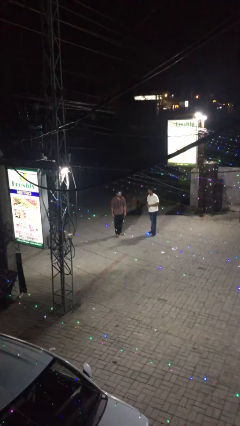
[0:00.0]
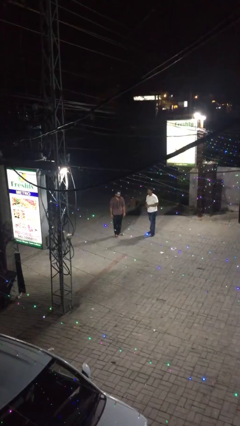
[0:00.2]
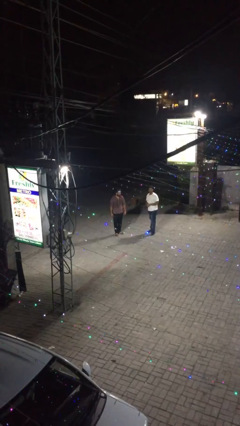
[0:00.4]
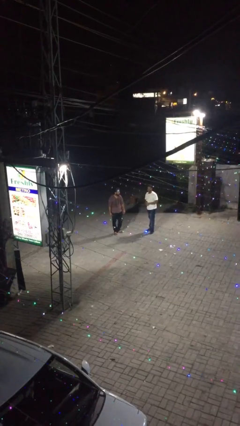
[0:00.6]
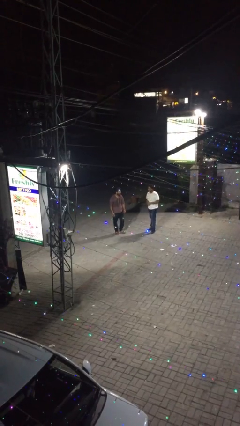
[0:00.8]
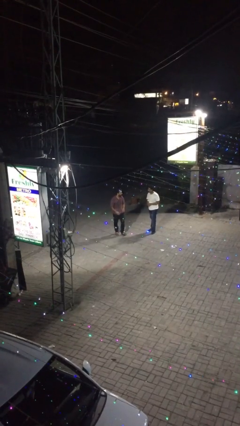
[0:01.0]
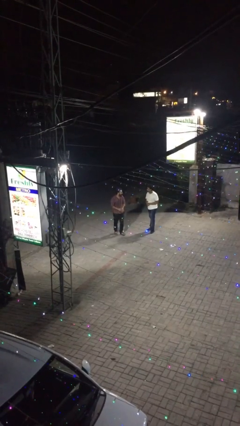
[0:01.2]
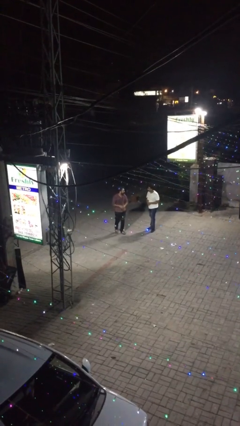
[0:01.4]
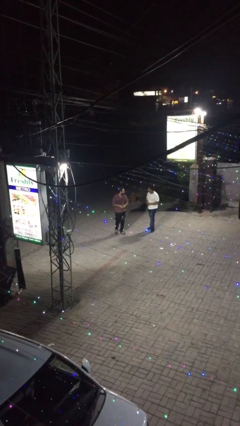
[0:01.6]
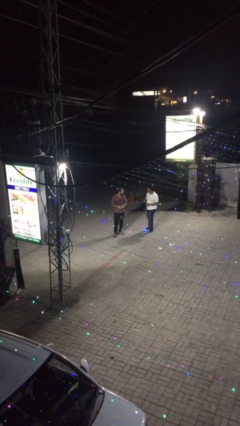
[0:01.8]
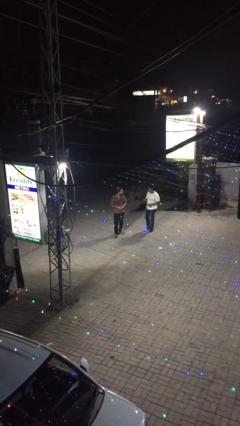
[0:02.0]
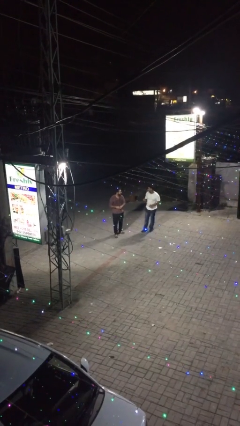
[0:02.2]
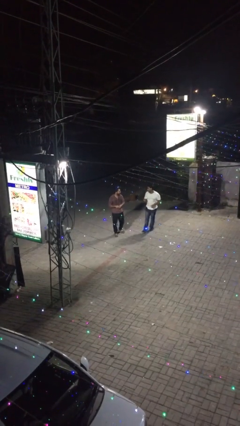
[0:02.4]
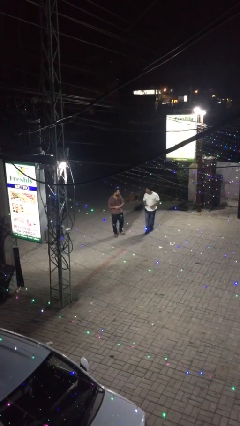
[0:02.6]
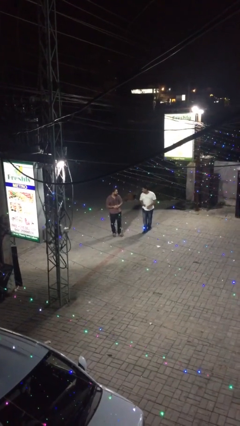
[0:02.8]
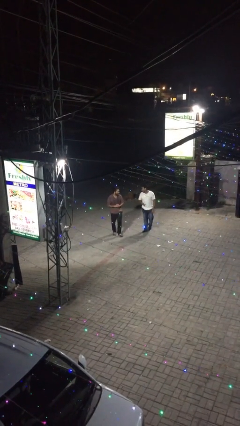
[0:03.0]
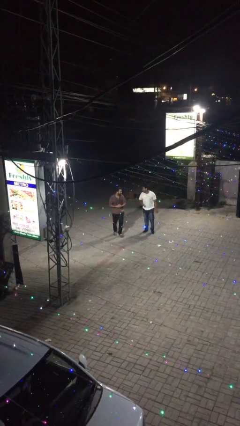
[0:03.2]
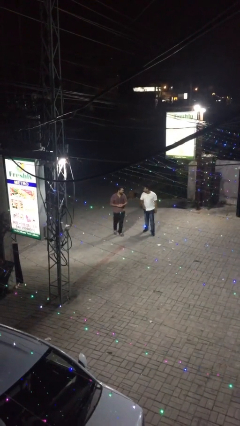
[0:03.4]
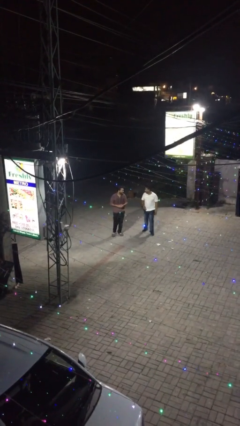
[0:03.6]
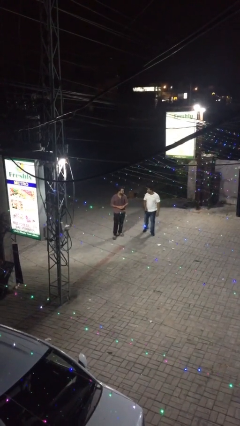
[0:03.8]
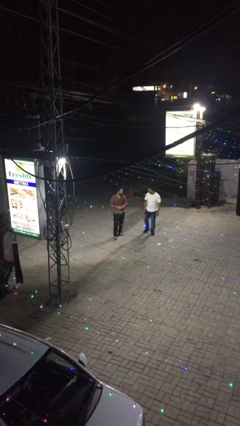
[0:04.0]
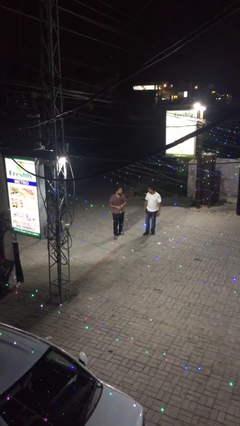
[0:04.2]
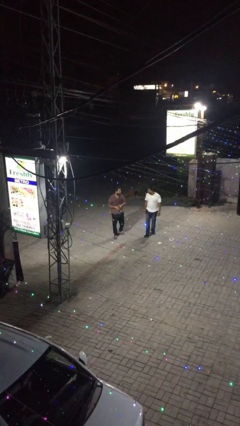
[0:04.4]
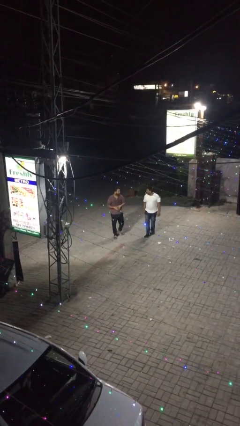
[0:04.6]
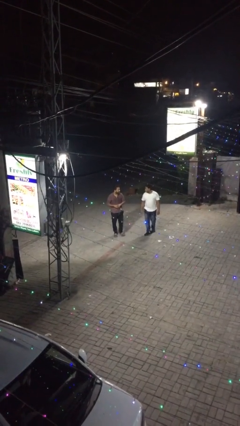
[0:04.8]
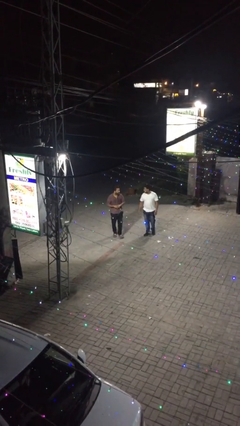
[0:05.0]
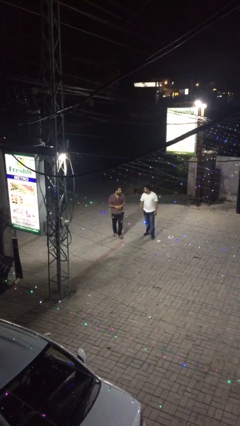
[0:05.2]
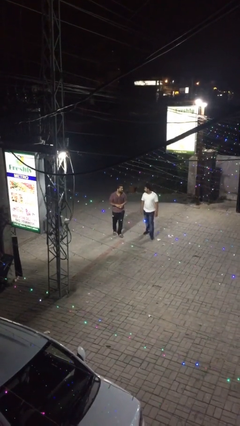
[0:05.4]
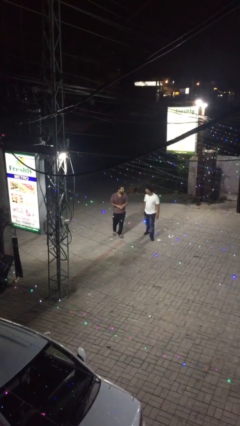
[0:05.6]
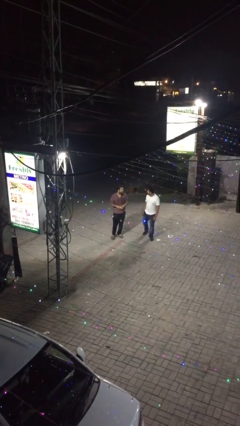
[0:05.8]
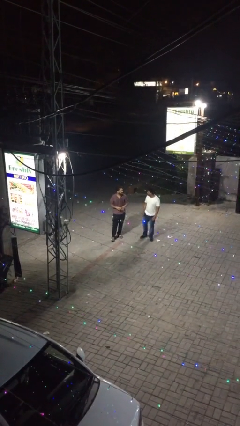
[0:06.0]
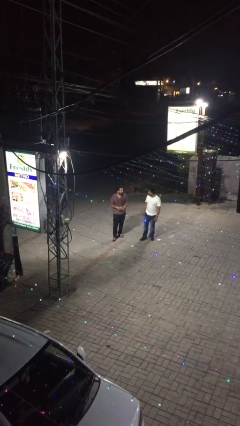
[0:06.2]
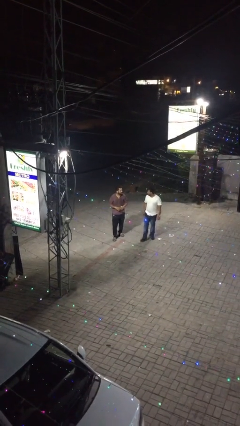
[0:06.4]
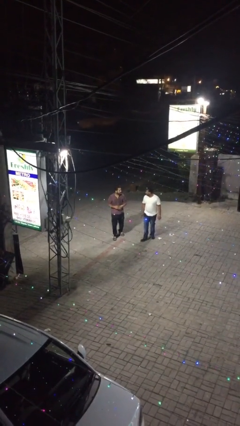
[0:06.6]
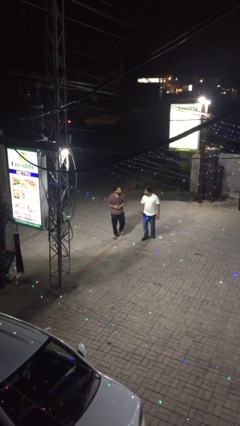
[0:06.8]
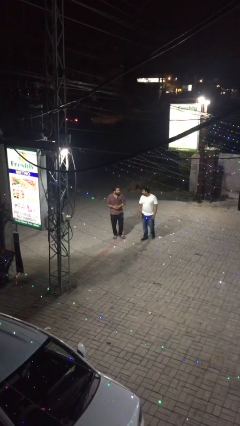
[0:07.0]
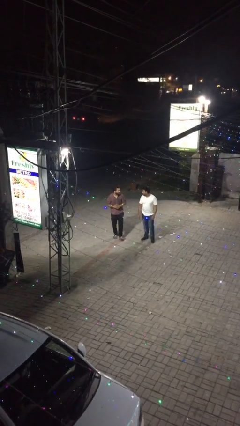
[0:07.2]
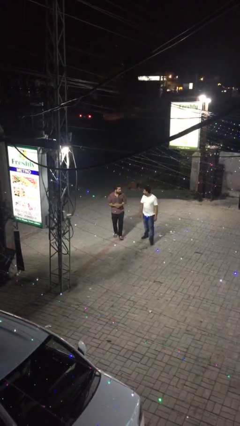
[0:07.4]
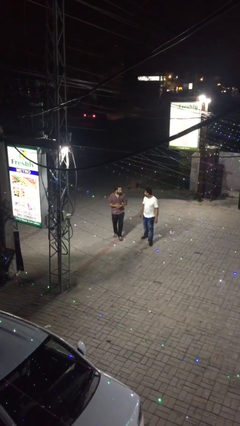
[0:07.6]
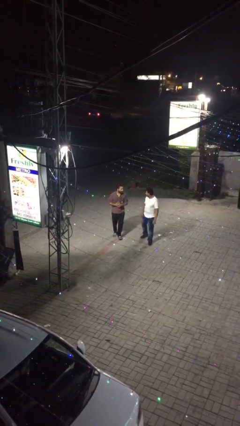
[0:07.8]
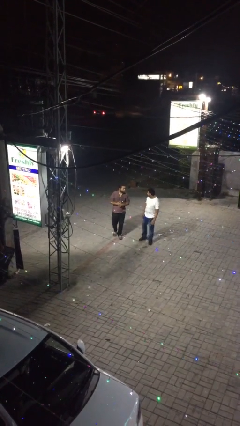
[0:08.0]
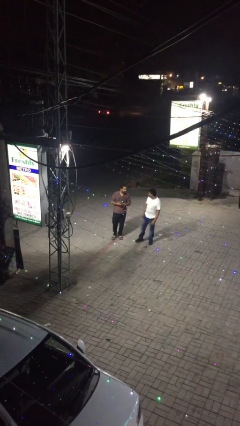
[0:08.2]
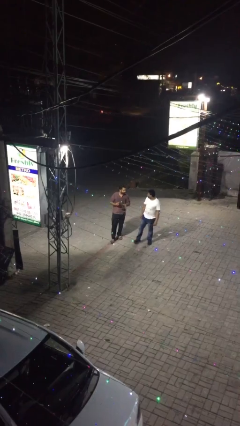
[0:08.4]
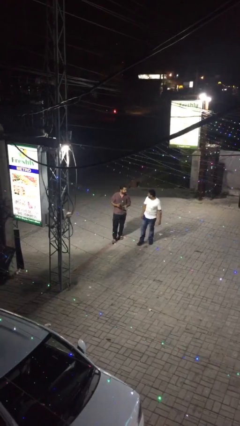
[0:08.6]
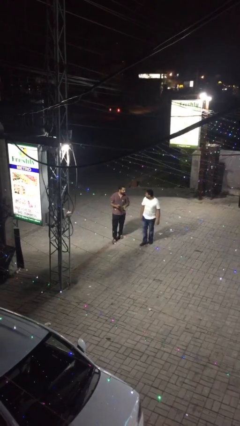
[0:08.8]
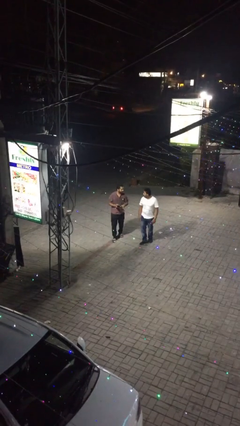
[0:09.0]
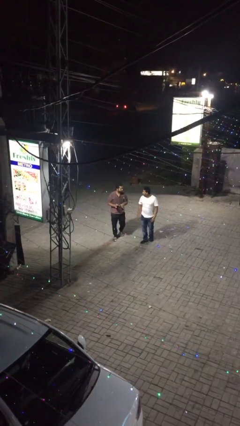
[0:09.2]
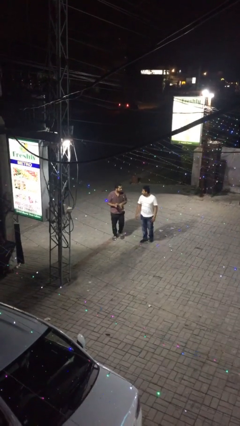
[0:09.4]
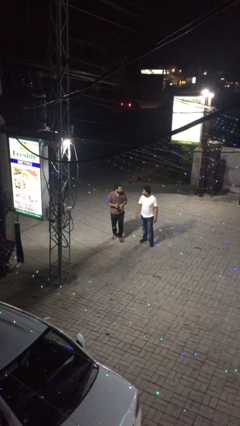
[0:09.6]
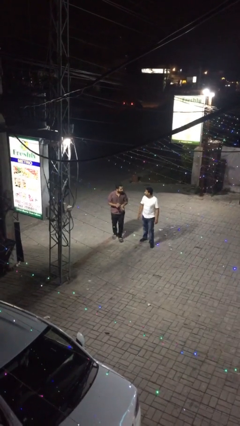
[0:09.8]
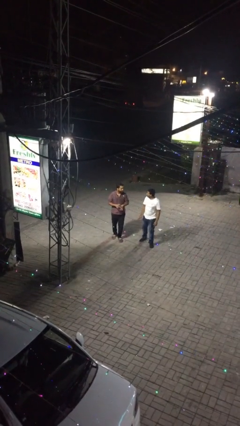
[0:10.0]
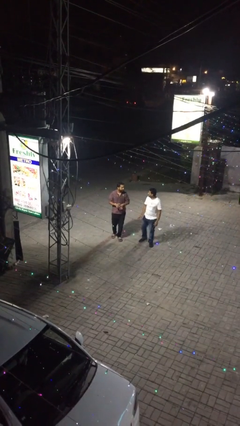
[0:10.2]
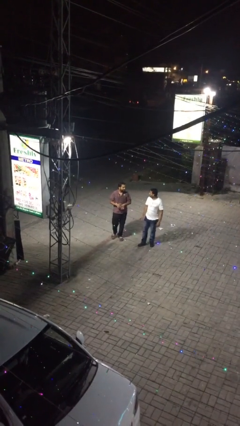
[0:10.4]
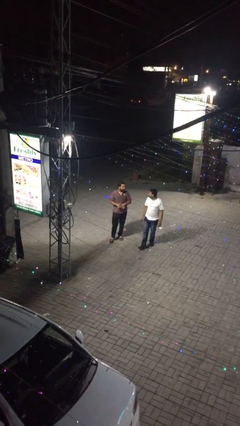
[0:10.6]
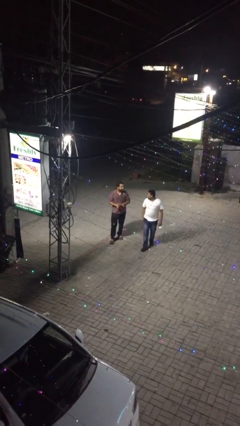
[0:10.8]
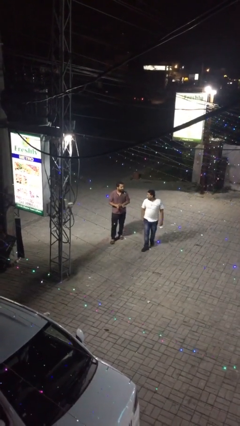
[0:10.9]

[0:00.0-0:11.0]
person talks to person

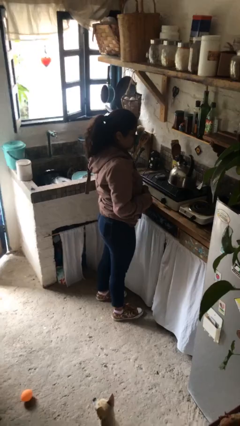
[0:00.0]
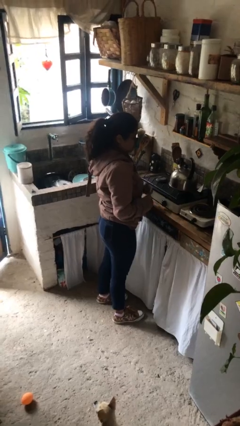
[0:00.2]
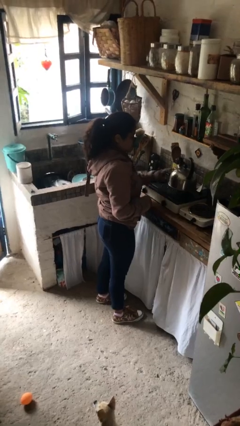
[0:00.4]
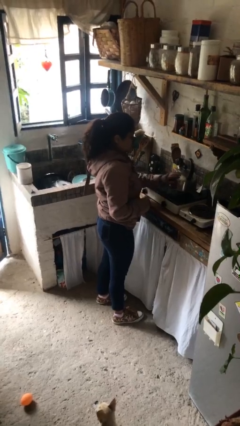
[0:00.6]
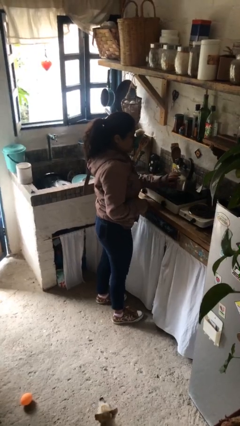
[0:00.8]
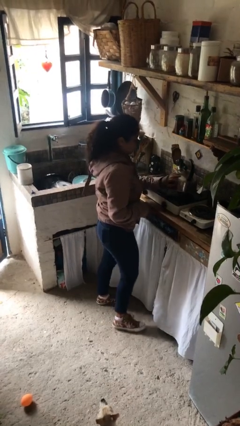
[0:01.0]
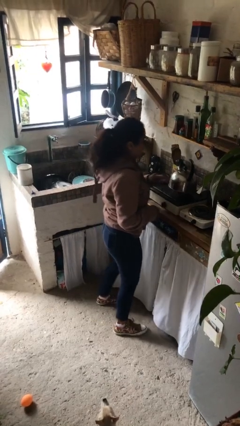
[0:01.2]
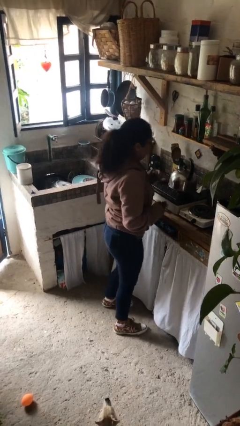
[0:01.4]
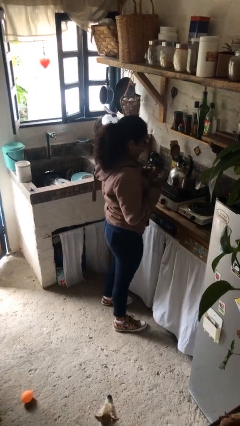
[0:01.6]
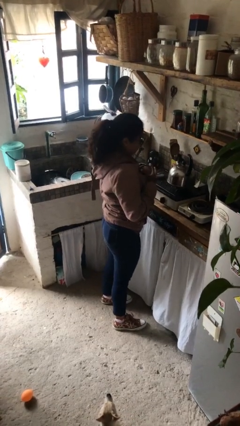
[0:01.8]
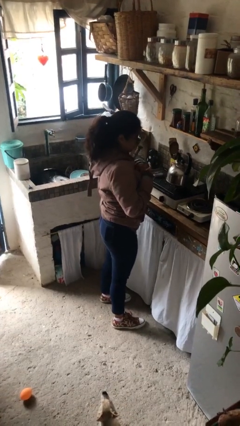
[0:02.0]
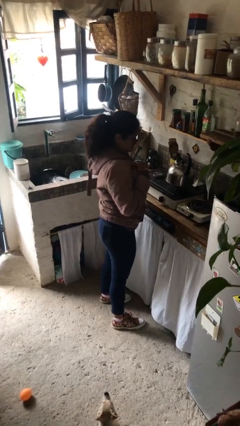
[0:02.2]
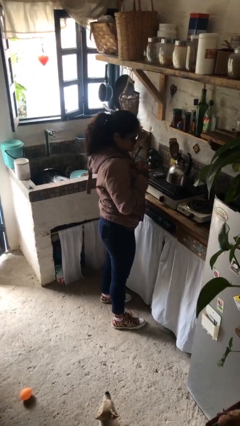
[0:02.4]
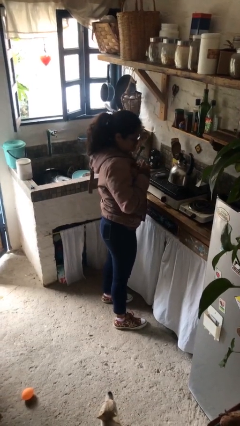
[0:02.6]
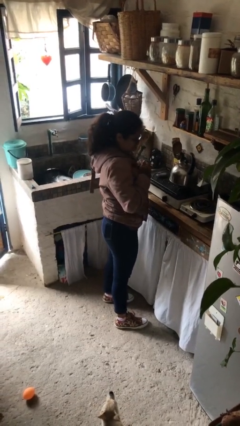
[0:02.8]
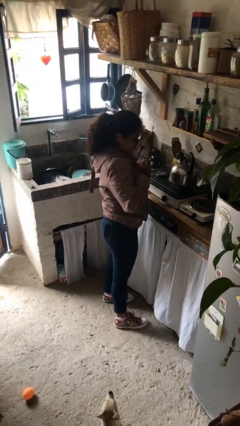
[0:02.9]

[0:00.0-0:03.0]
person burns hand

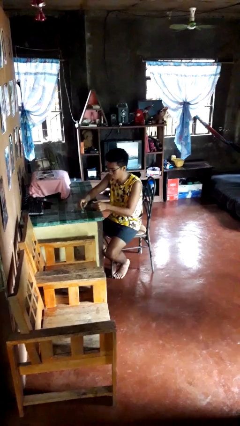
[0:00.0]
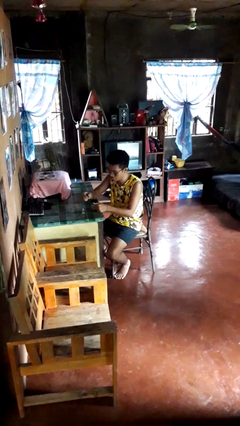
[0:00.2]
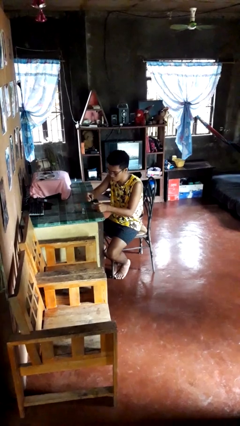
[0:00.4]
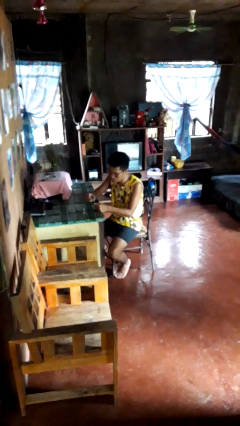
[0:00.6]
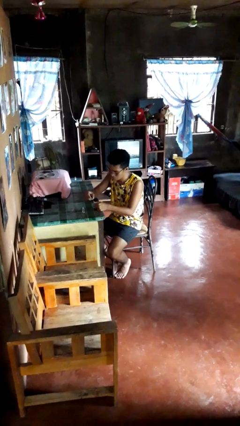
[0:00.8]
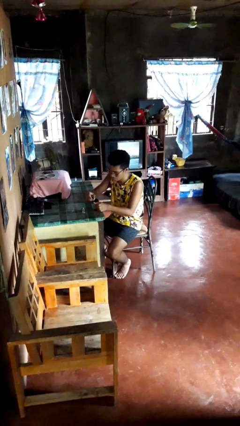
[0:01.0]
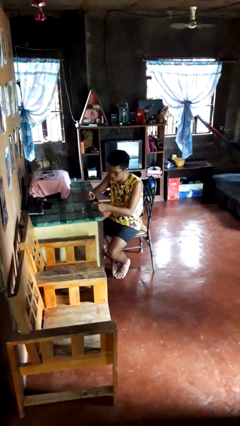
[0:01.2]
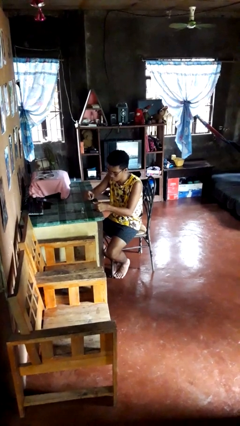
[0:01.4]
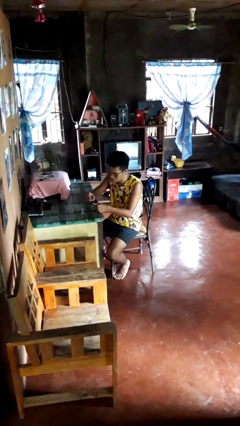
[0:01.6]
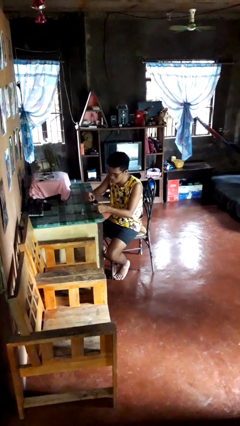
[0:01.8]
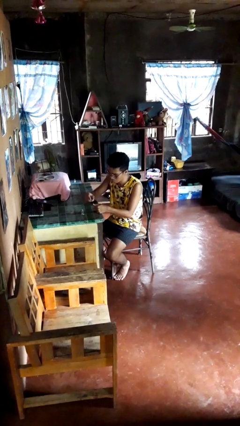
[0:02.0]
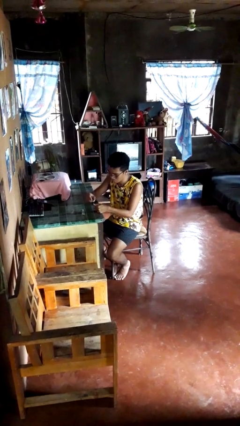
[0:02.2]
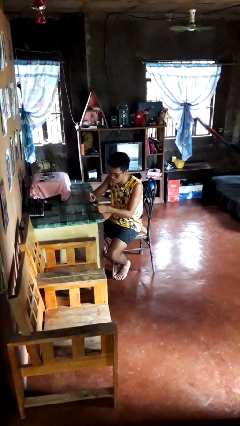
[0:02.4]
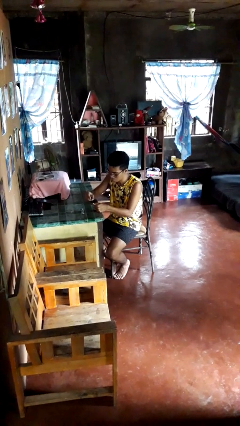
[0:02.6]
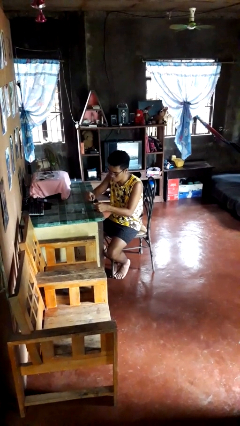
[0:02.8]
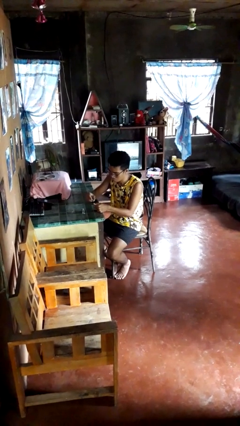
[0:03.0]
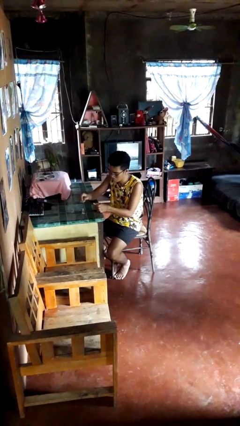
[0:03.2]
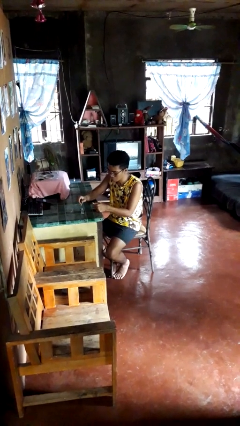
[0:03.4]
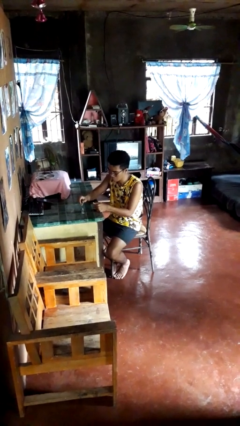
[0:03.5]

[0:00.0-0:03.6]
person paints fingernails

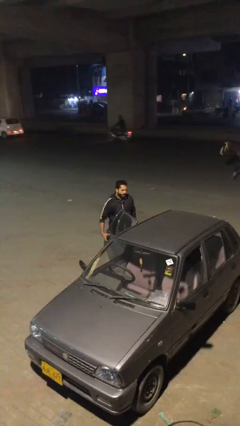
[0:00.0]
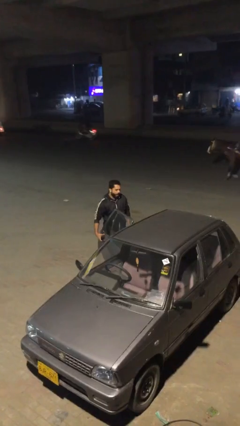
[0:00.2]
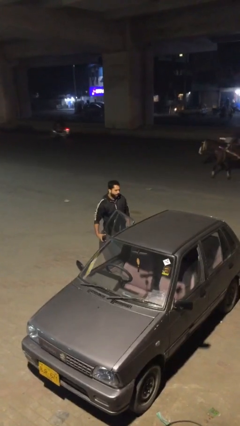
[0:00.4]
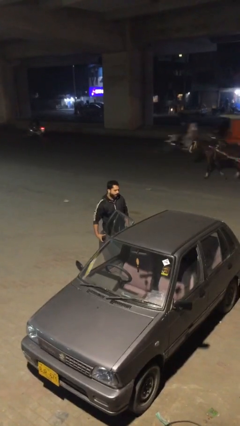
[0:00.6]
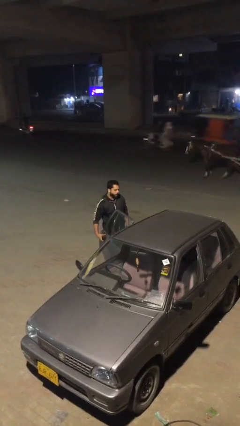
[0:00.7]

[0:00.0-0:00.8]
person opens car door
